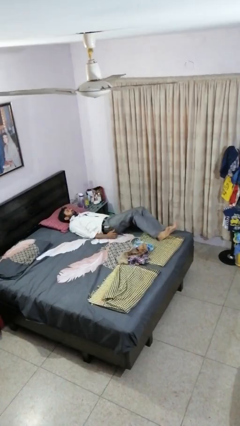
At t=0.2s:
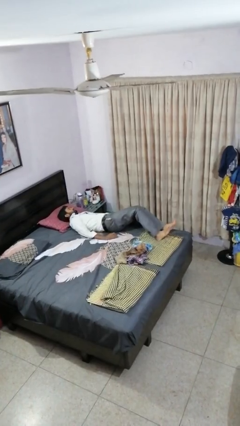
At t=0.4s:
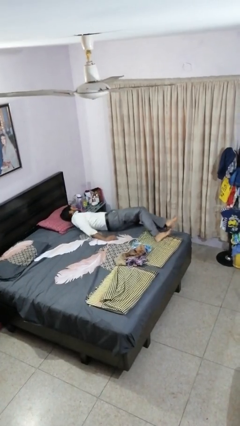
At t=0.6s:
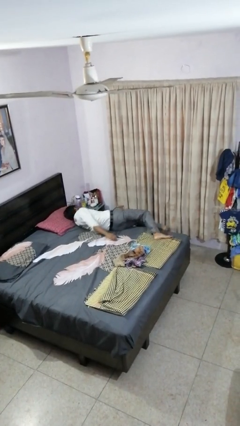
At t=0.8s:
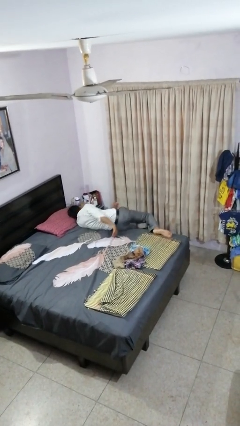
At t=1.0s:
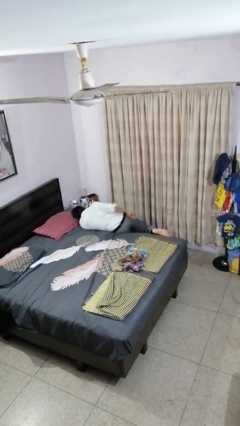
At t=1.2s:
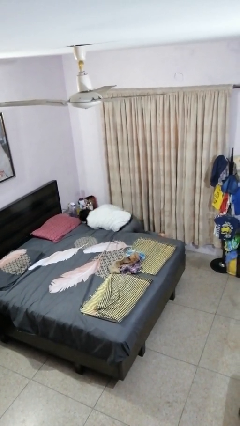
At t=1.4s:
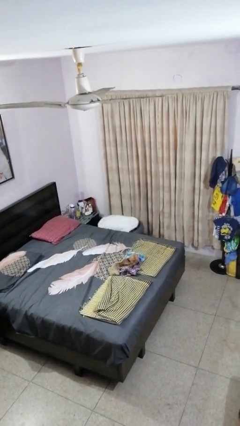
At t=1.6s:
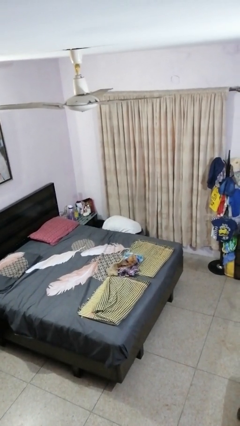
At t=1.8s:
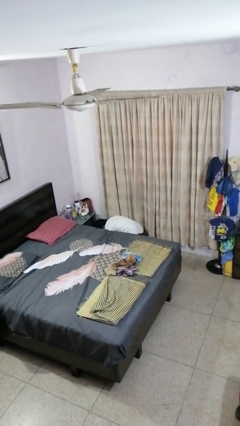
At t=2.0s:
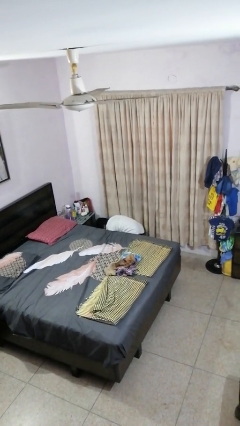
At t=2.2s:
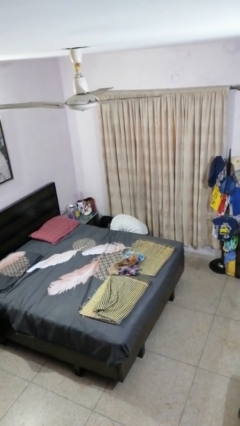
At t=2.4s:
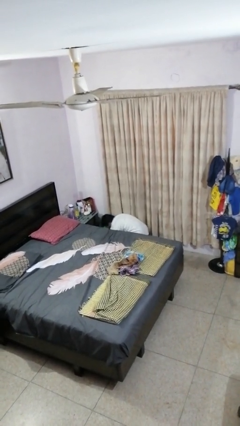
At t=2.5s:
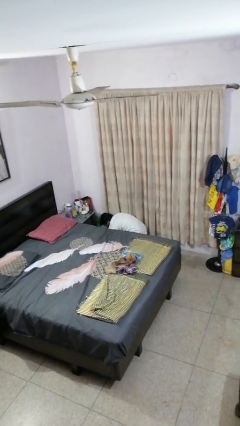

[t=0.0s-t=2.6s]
person falls from bed

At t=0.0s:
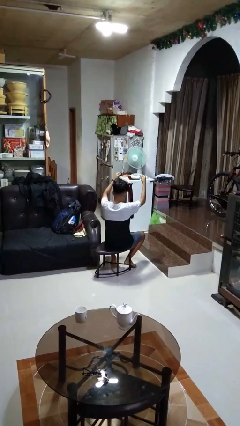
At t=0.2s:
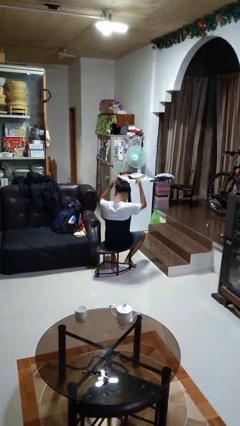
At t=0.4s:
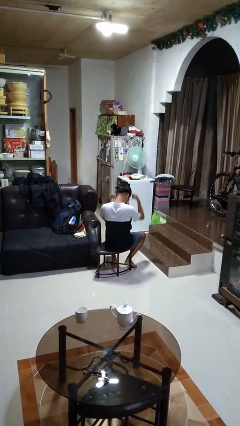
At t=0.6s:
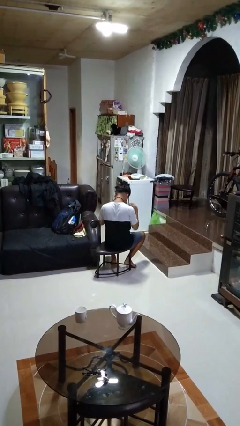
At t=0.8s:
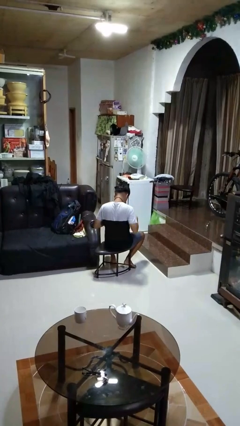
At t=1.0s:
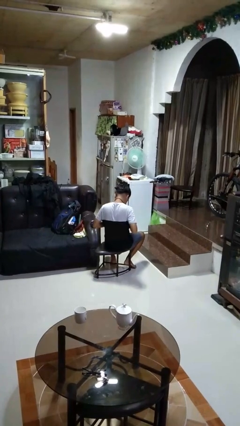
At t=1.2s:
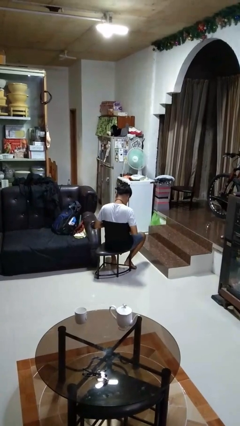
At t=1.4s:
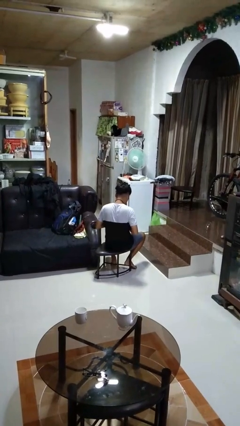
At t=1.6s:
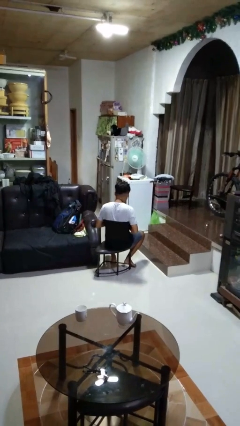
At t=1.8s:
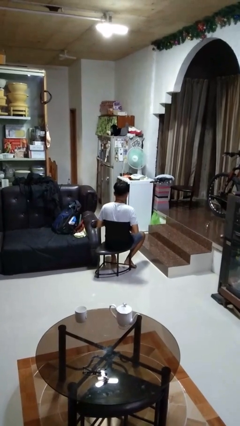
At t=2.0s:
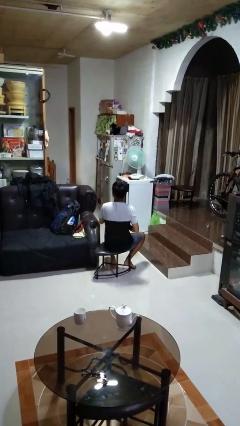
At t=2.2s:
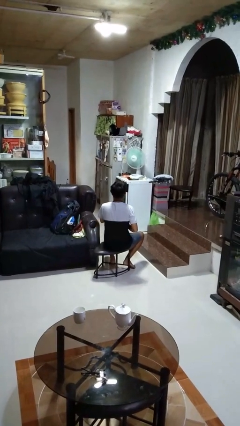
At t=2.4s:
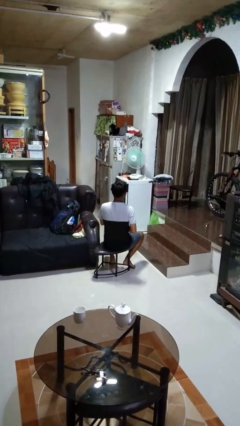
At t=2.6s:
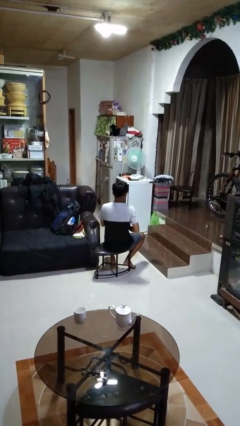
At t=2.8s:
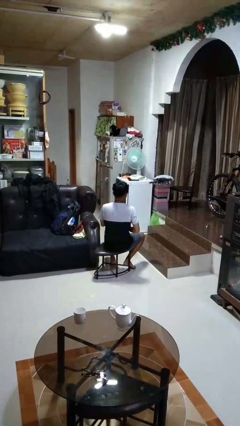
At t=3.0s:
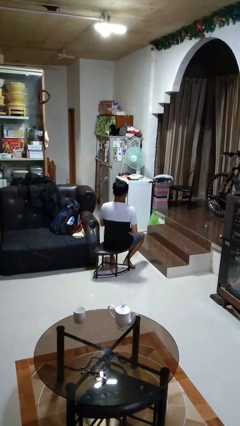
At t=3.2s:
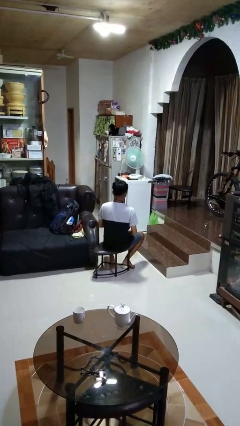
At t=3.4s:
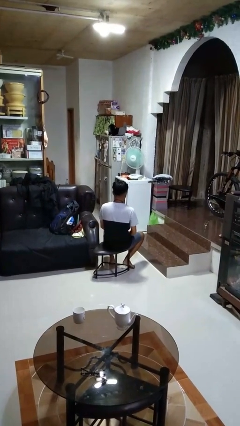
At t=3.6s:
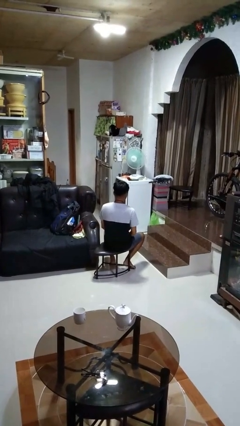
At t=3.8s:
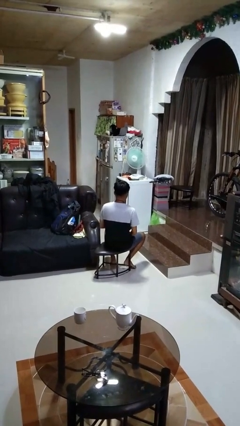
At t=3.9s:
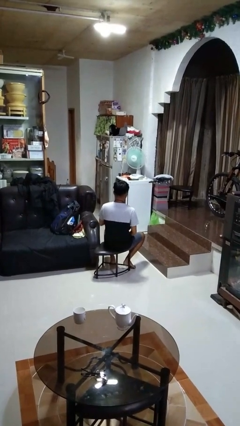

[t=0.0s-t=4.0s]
person puts on necktie

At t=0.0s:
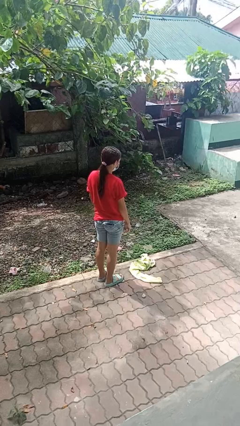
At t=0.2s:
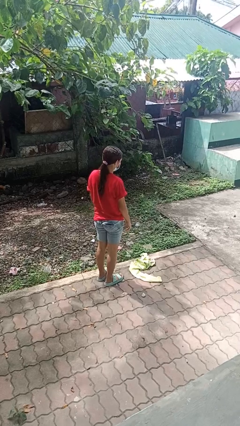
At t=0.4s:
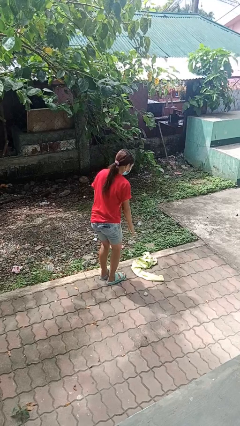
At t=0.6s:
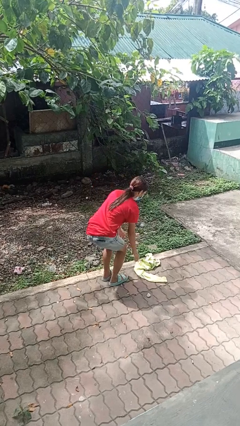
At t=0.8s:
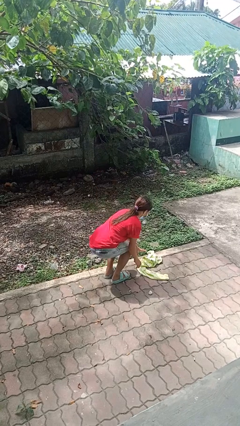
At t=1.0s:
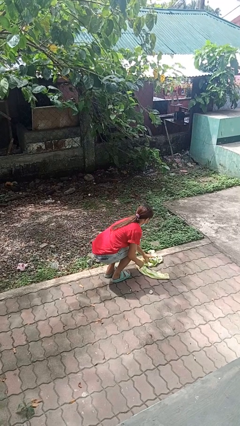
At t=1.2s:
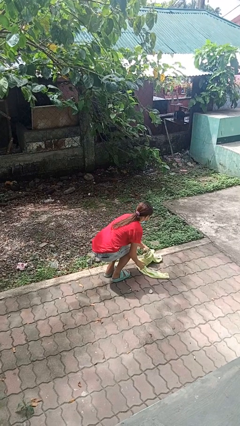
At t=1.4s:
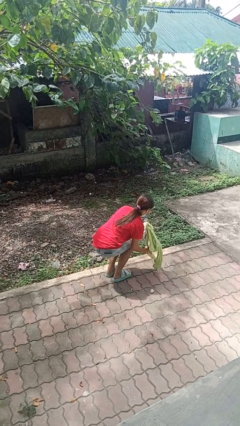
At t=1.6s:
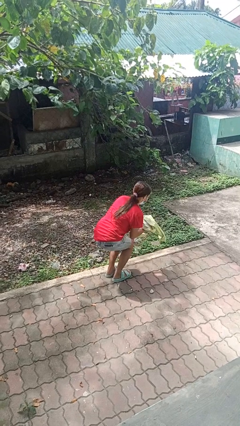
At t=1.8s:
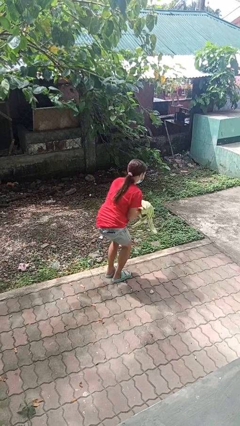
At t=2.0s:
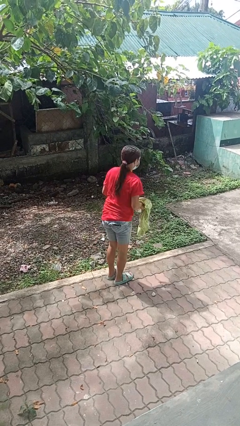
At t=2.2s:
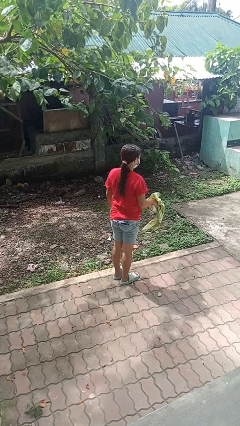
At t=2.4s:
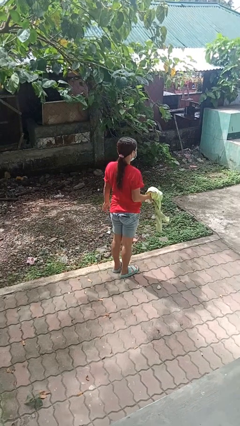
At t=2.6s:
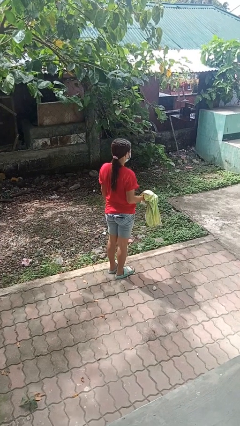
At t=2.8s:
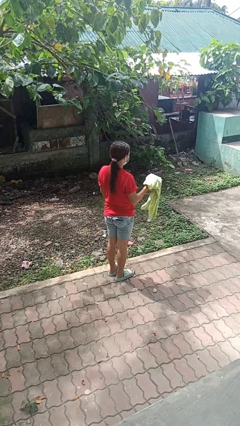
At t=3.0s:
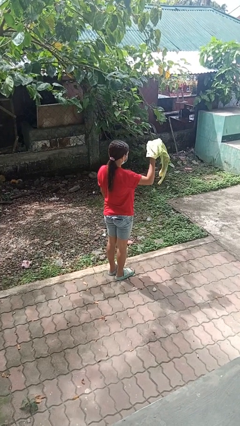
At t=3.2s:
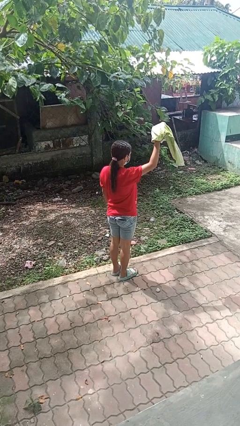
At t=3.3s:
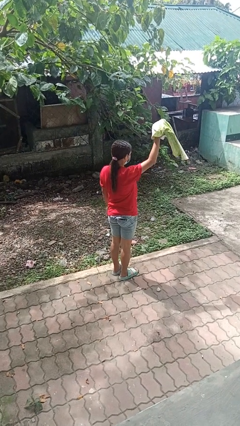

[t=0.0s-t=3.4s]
person picks up object from floor

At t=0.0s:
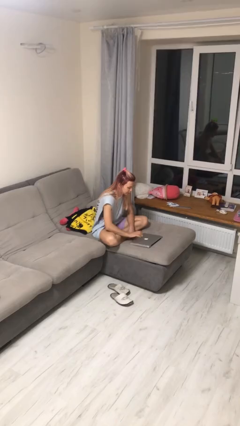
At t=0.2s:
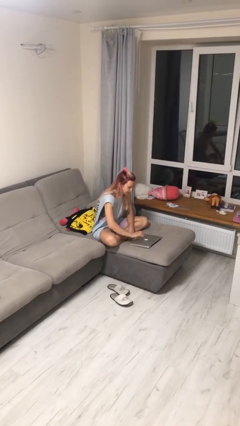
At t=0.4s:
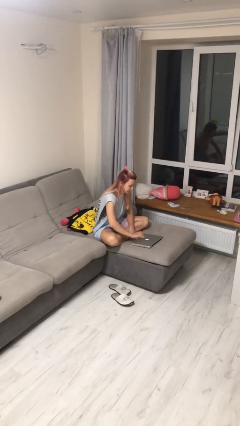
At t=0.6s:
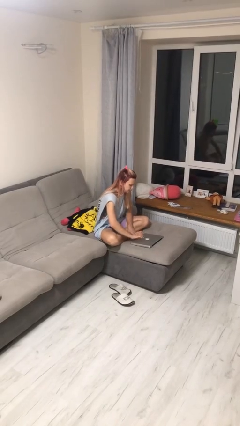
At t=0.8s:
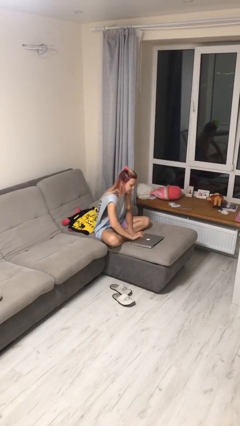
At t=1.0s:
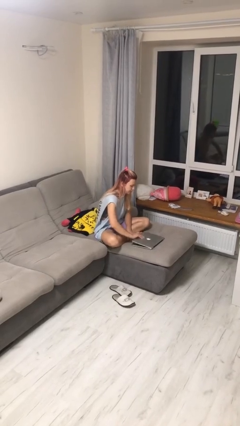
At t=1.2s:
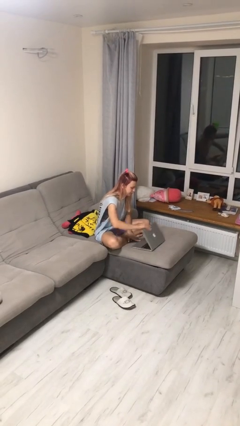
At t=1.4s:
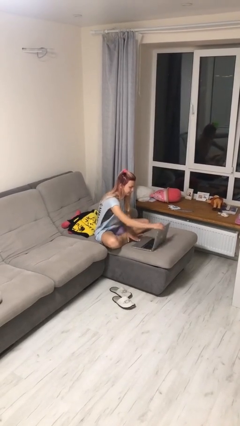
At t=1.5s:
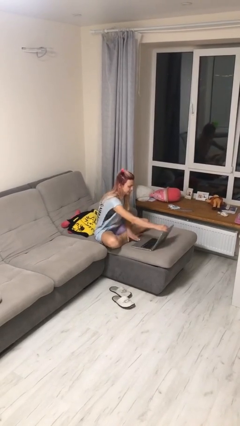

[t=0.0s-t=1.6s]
person opens laptop

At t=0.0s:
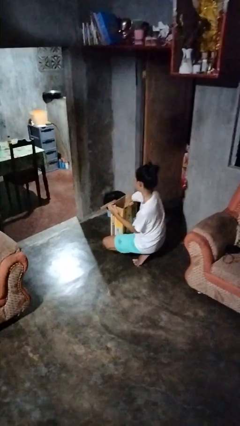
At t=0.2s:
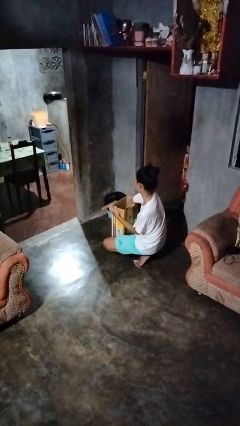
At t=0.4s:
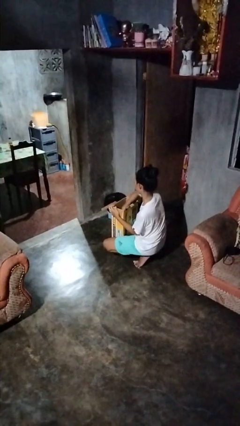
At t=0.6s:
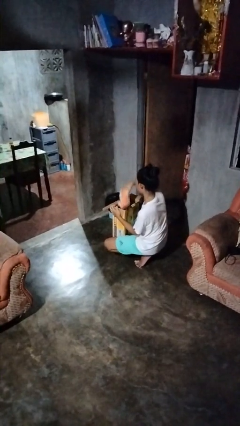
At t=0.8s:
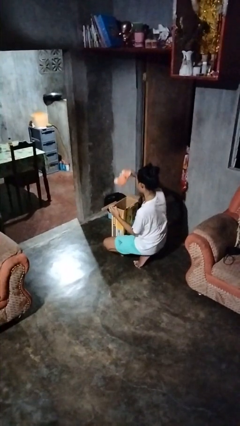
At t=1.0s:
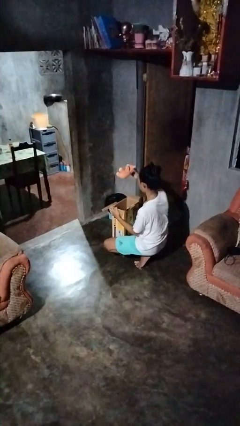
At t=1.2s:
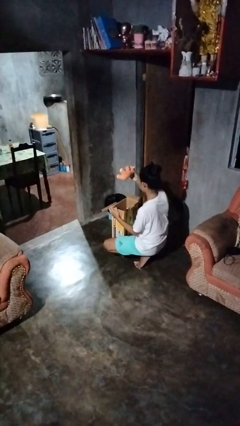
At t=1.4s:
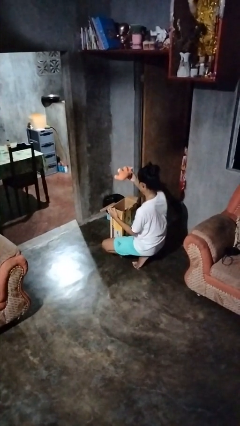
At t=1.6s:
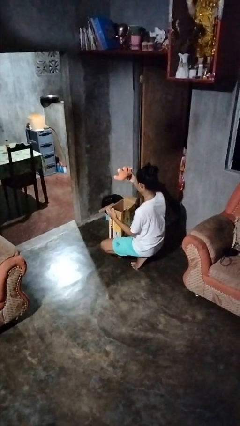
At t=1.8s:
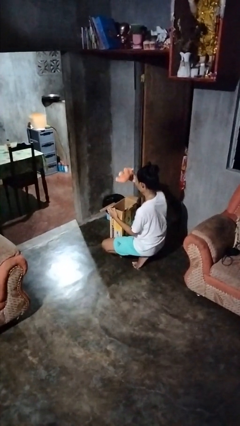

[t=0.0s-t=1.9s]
person takes object from box

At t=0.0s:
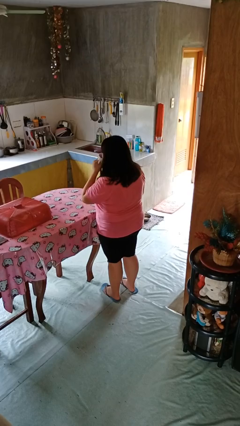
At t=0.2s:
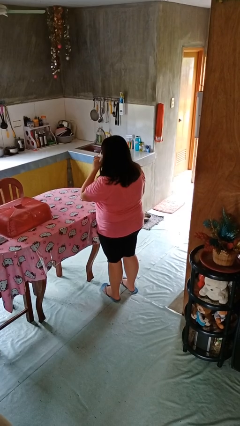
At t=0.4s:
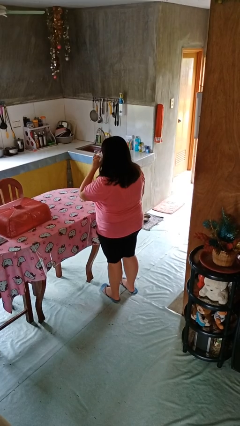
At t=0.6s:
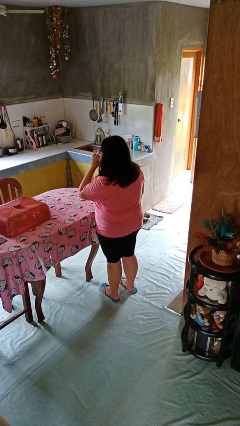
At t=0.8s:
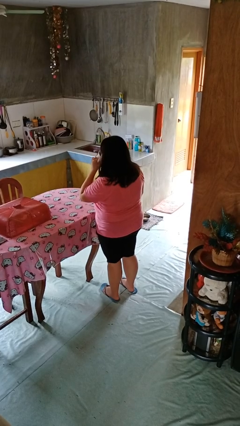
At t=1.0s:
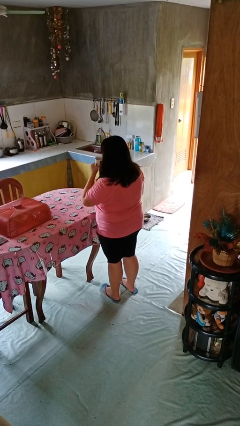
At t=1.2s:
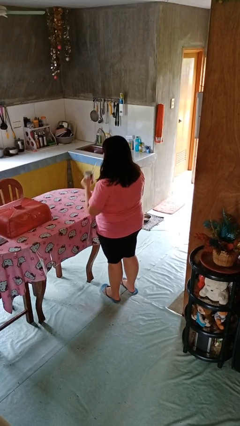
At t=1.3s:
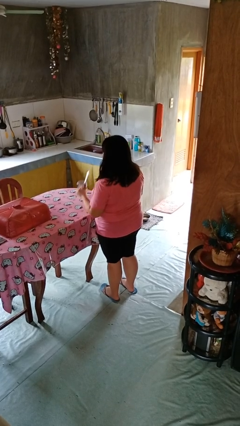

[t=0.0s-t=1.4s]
person drinks from mug

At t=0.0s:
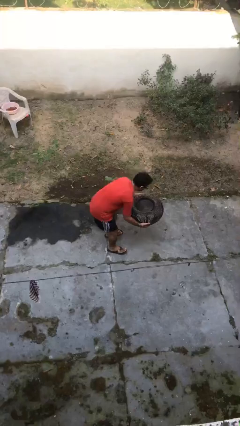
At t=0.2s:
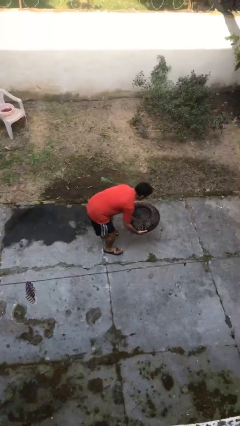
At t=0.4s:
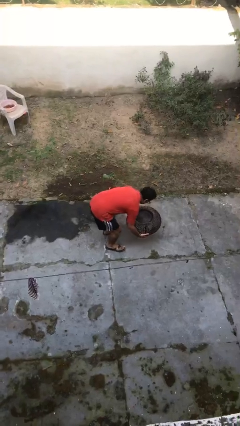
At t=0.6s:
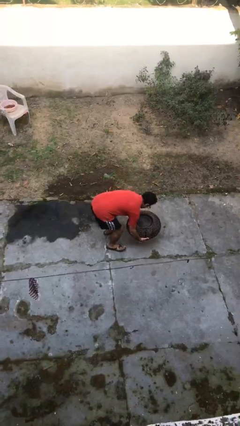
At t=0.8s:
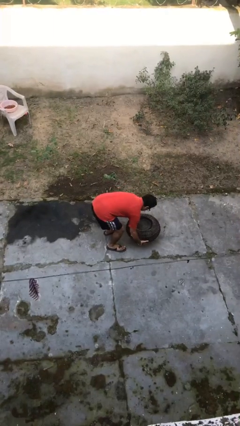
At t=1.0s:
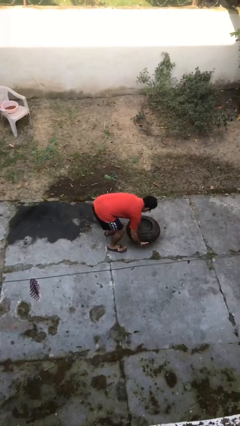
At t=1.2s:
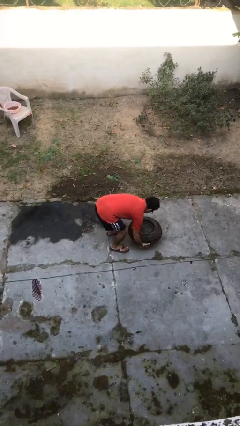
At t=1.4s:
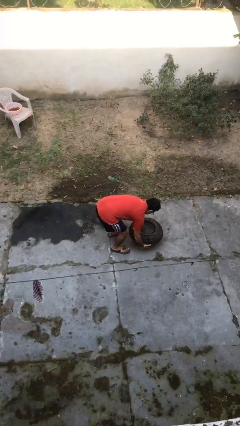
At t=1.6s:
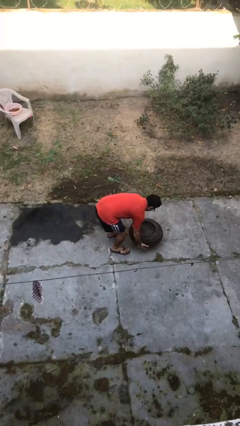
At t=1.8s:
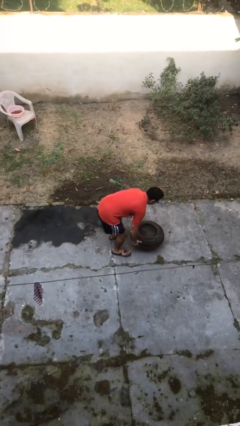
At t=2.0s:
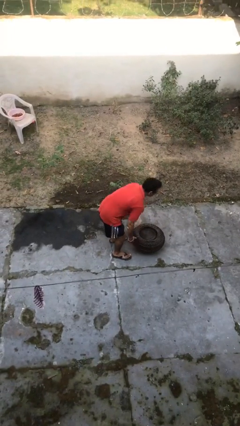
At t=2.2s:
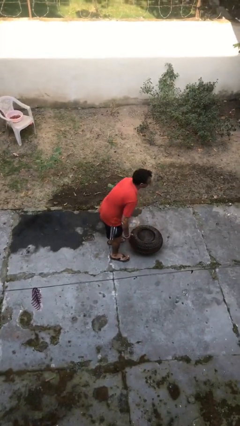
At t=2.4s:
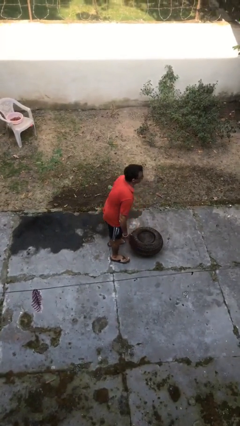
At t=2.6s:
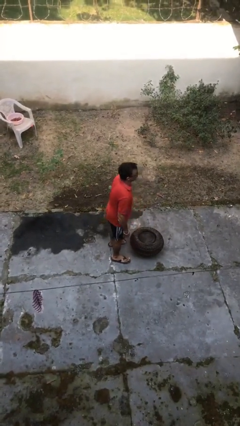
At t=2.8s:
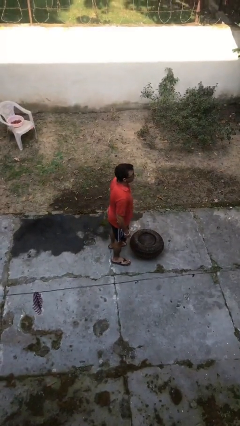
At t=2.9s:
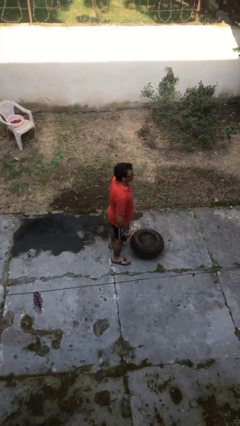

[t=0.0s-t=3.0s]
person puts down object on floor
